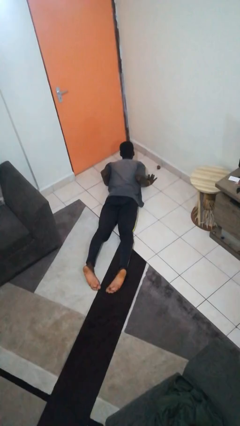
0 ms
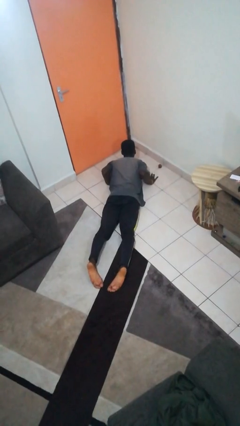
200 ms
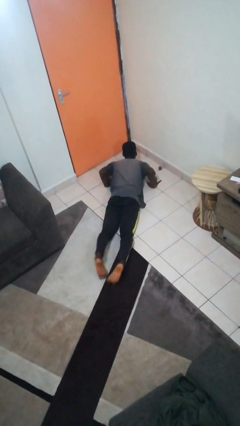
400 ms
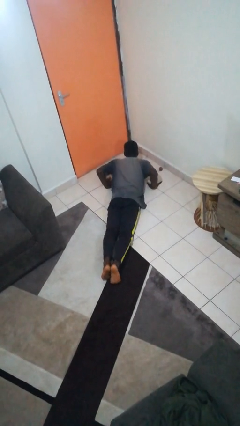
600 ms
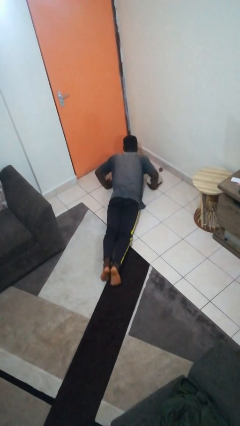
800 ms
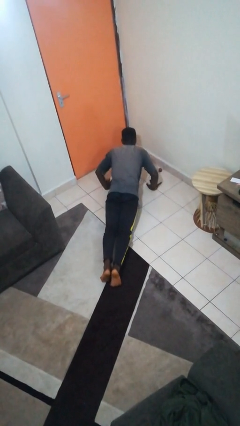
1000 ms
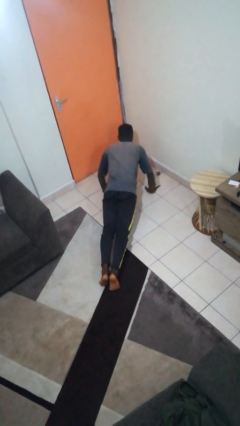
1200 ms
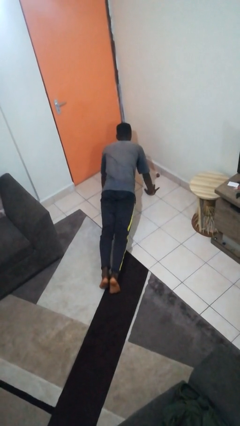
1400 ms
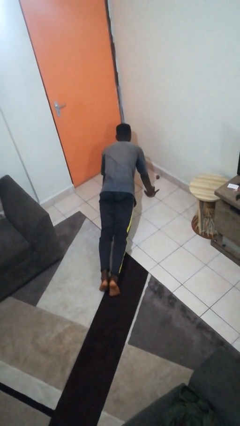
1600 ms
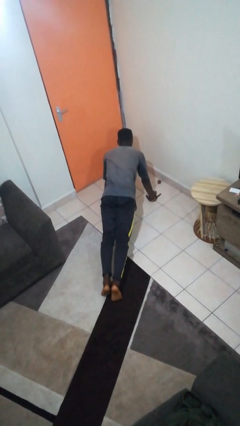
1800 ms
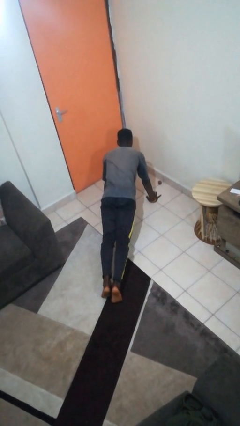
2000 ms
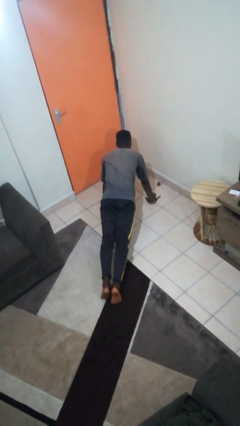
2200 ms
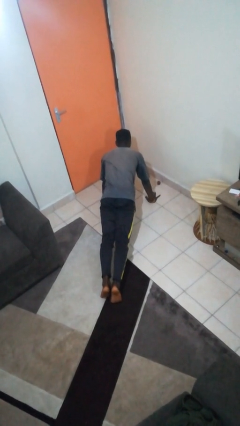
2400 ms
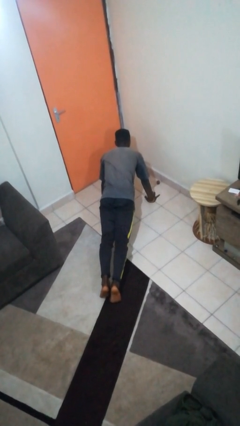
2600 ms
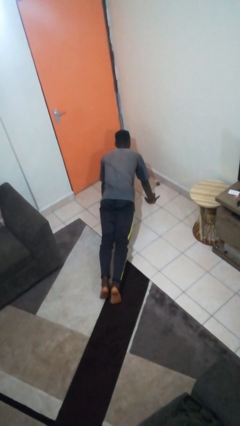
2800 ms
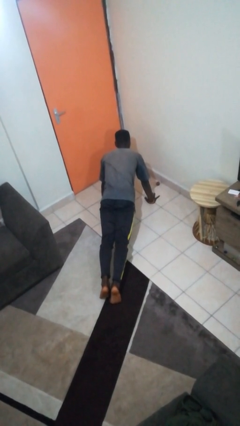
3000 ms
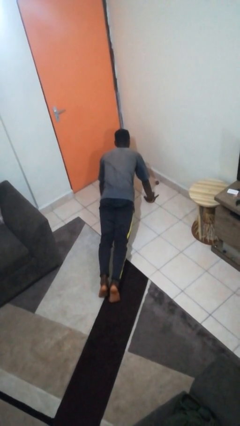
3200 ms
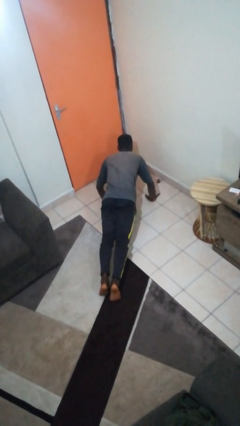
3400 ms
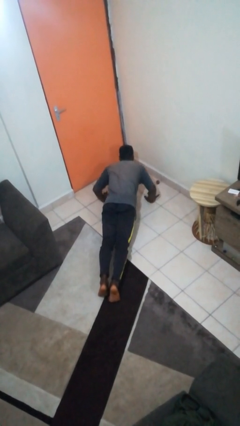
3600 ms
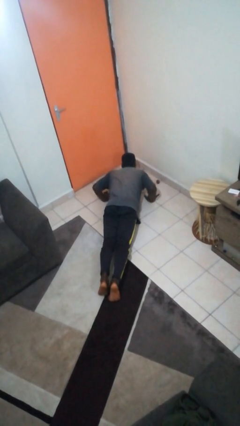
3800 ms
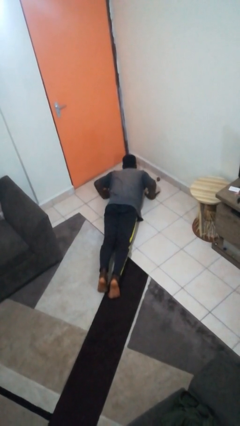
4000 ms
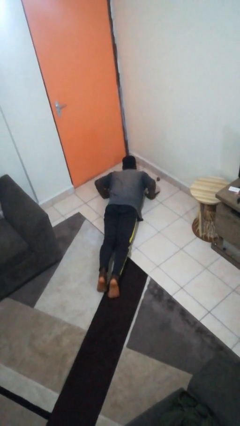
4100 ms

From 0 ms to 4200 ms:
person exercises with pushup

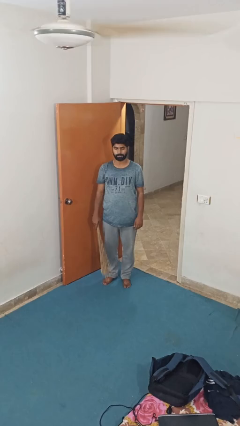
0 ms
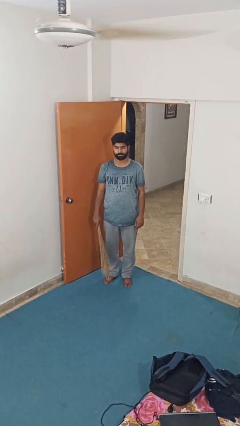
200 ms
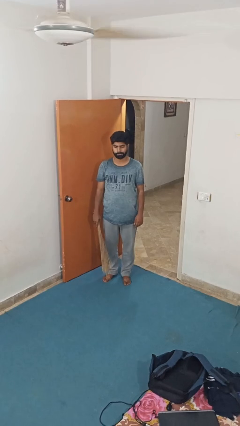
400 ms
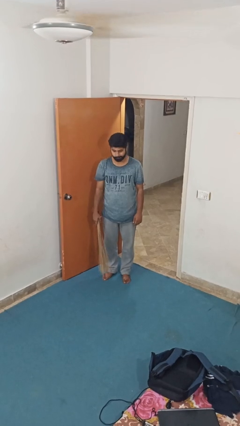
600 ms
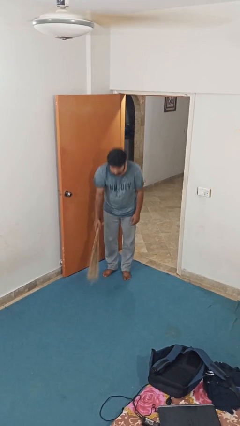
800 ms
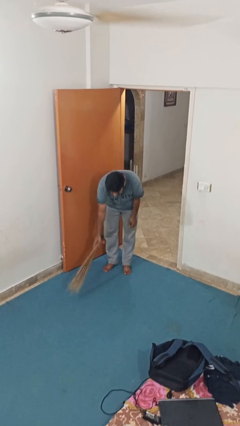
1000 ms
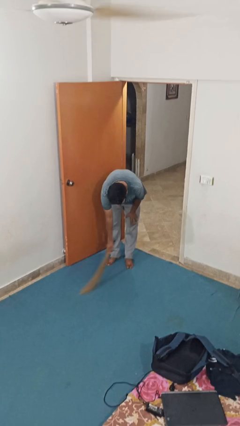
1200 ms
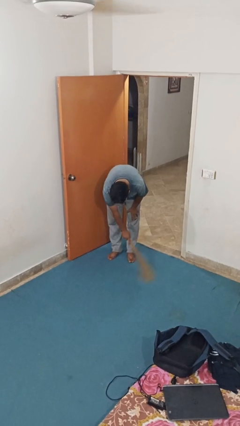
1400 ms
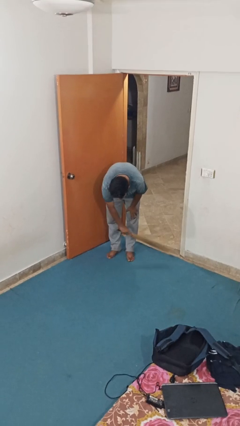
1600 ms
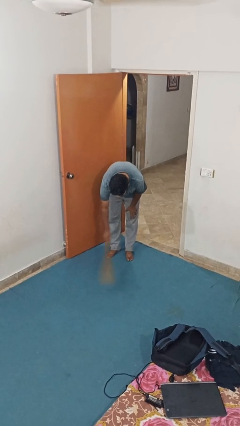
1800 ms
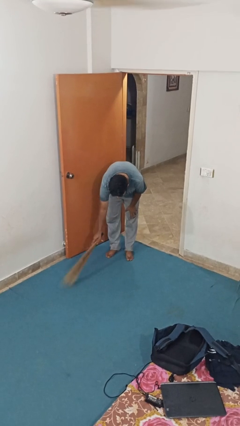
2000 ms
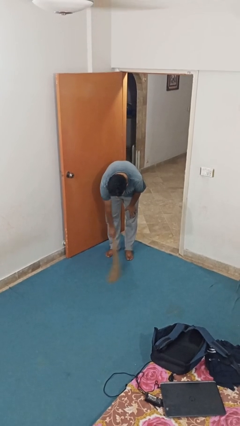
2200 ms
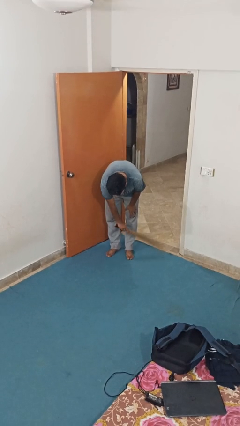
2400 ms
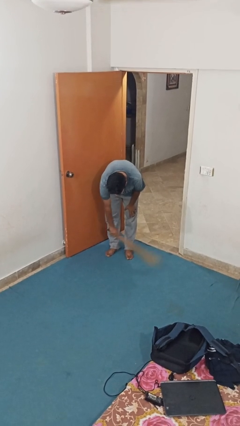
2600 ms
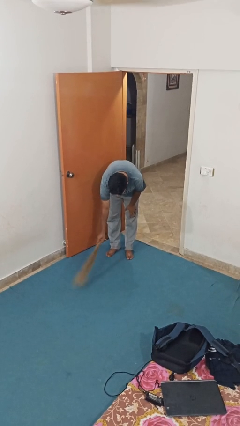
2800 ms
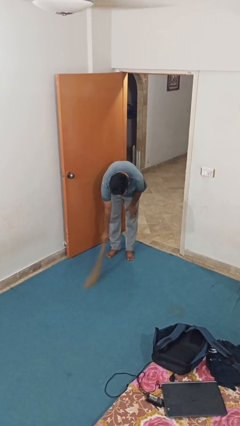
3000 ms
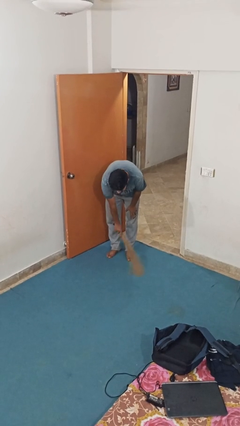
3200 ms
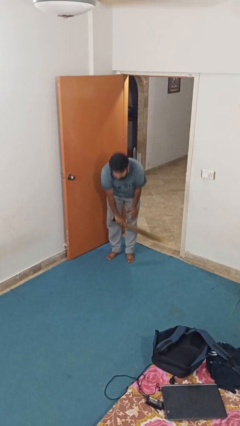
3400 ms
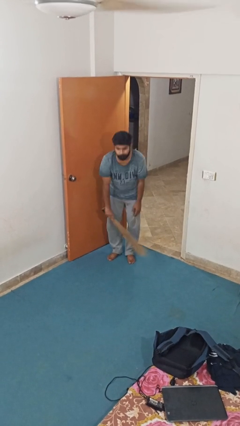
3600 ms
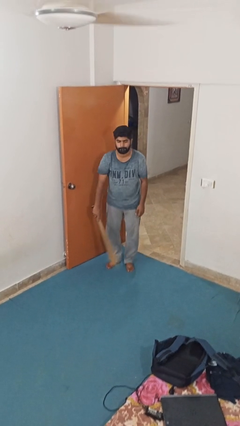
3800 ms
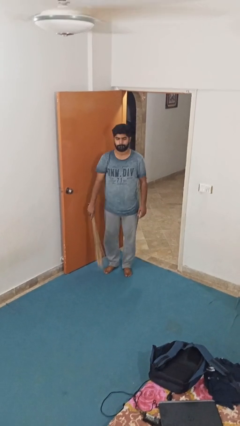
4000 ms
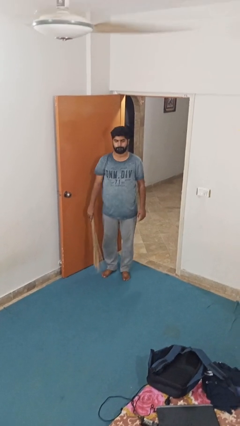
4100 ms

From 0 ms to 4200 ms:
person sweeps floor

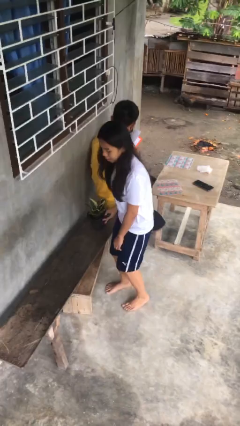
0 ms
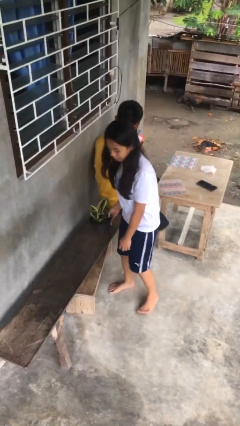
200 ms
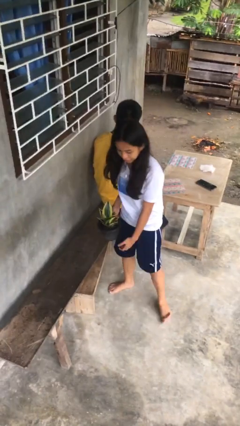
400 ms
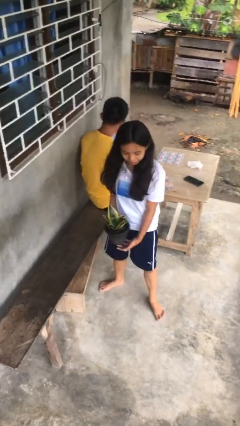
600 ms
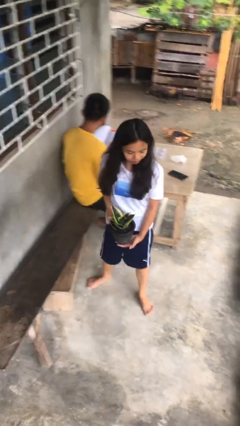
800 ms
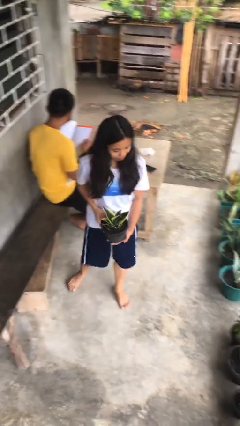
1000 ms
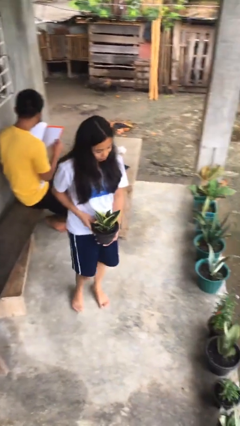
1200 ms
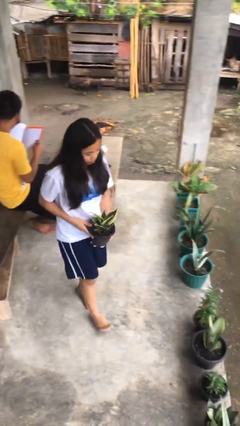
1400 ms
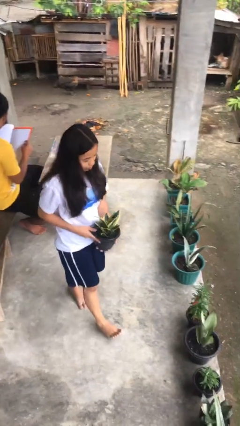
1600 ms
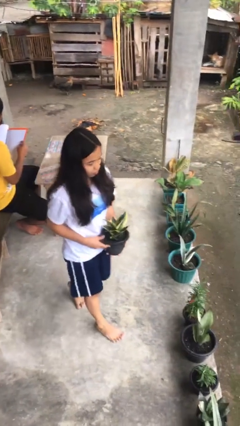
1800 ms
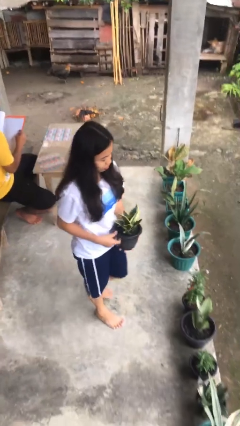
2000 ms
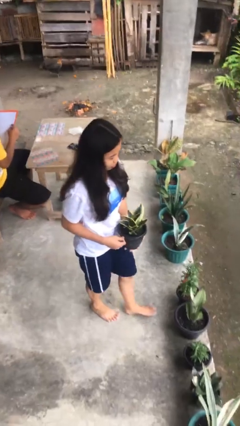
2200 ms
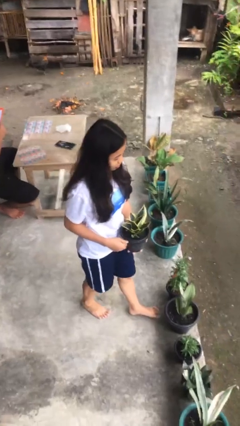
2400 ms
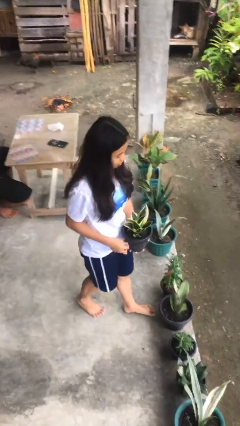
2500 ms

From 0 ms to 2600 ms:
person steals object from person

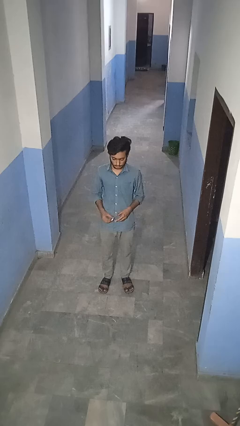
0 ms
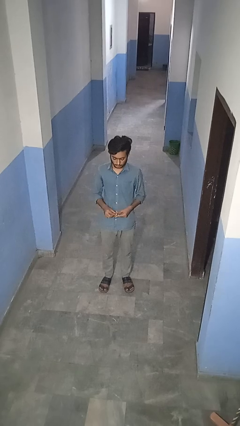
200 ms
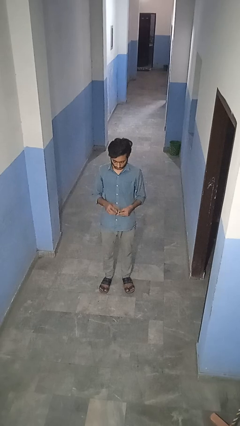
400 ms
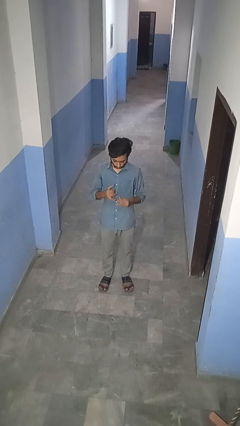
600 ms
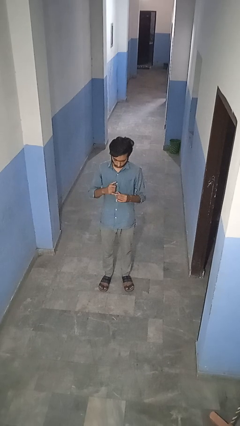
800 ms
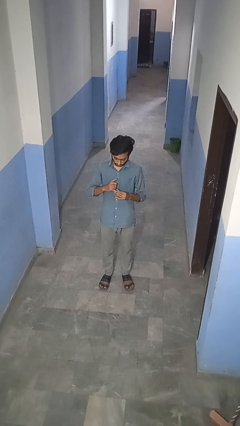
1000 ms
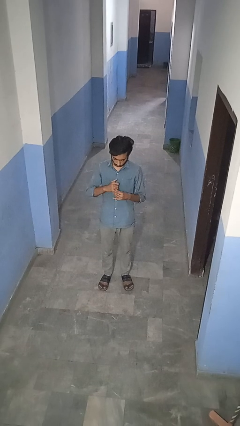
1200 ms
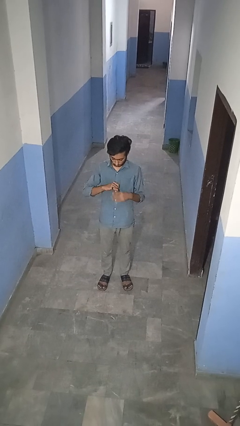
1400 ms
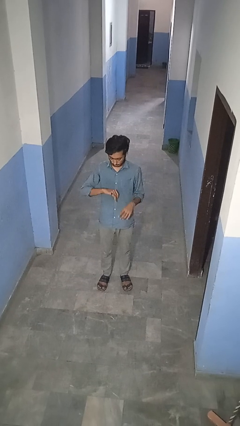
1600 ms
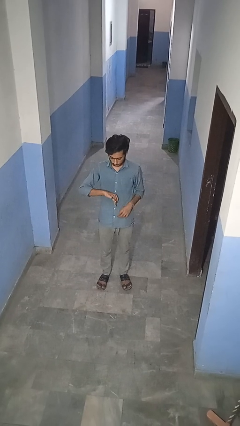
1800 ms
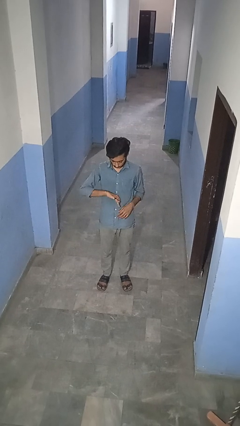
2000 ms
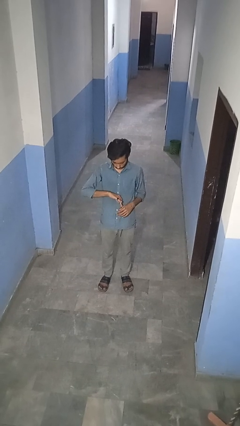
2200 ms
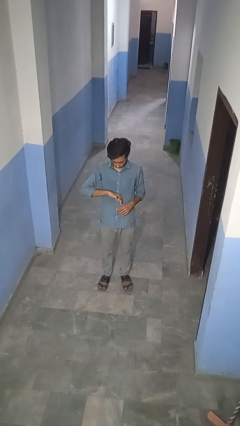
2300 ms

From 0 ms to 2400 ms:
person puts on ring

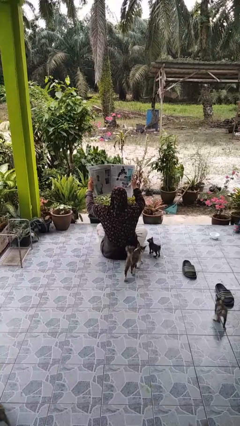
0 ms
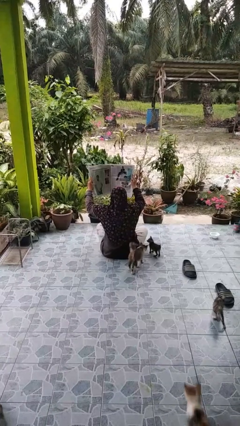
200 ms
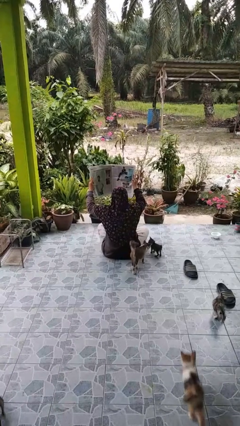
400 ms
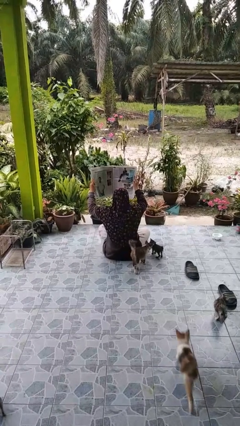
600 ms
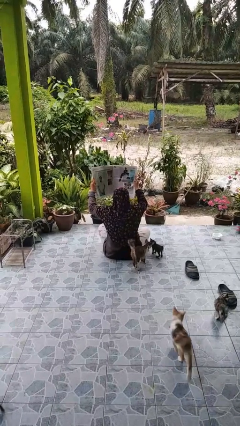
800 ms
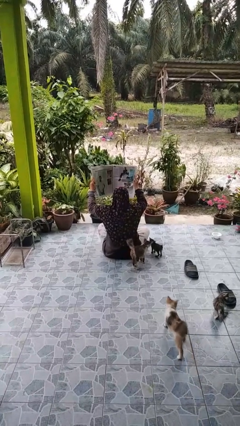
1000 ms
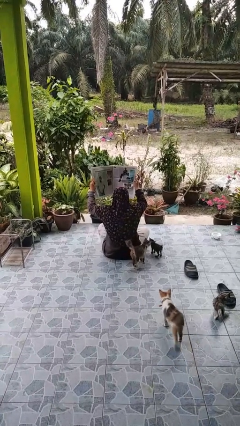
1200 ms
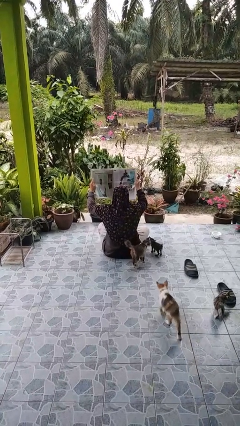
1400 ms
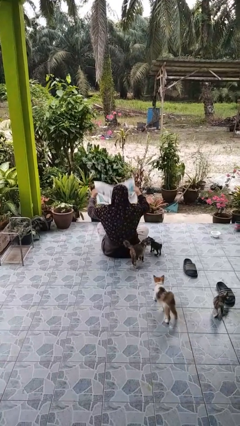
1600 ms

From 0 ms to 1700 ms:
person reads newspaper

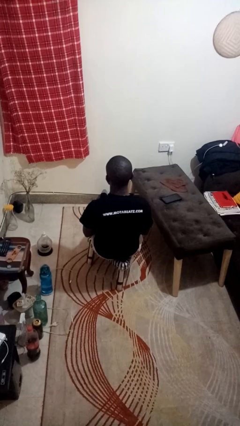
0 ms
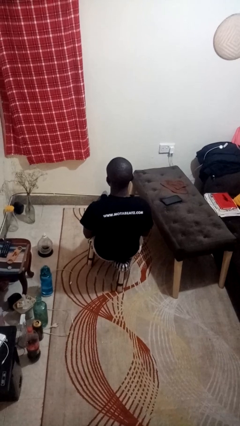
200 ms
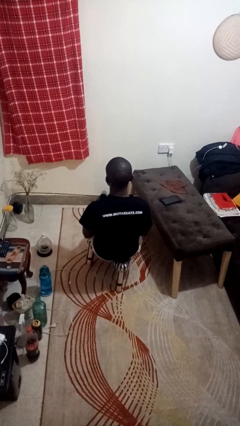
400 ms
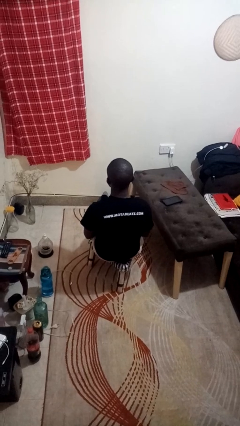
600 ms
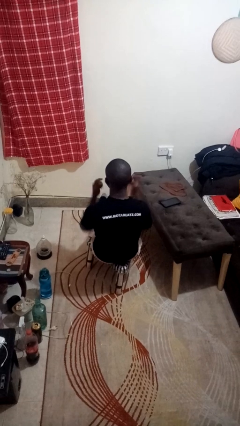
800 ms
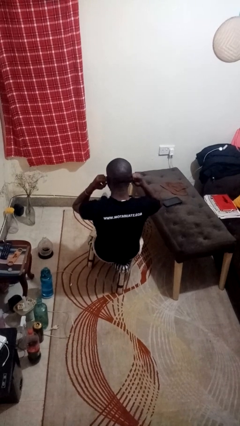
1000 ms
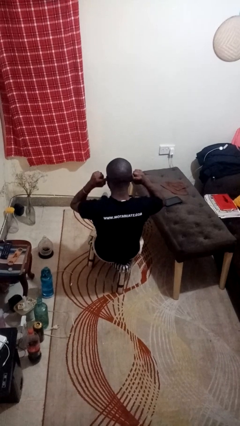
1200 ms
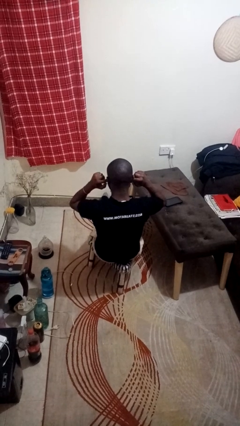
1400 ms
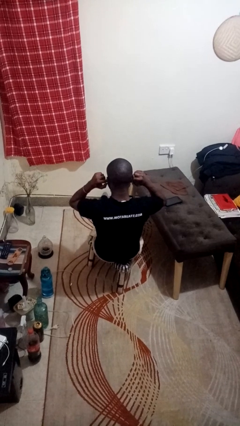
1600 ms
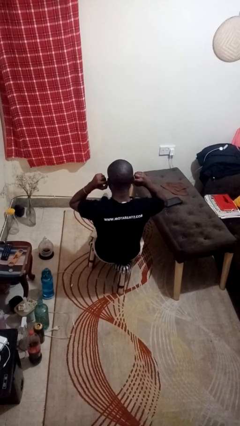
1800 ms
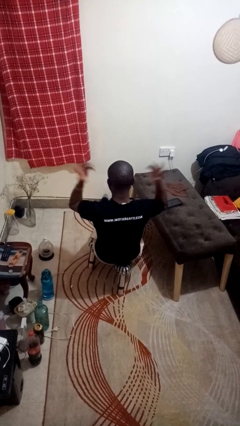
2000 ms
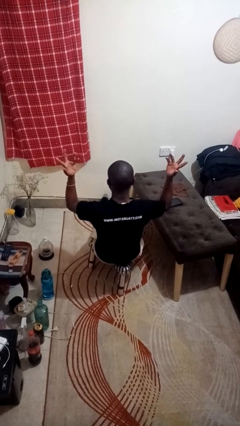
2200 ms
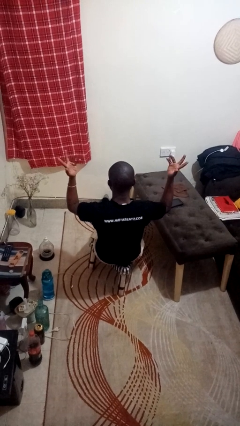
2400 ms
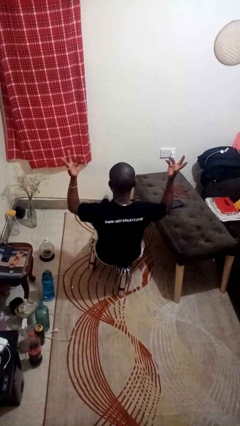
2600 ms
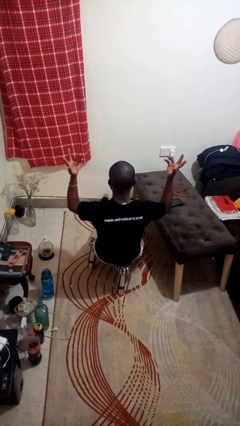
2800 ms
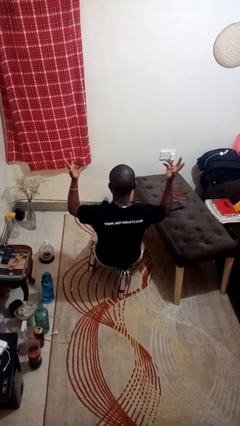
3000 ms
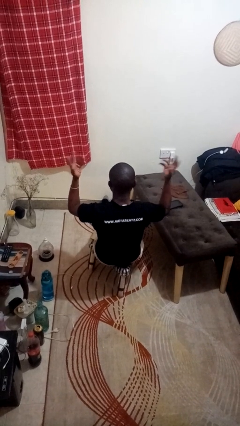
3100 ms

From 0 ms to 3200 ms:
person puts fingers in ear
